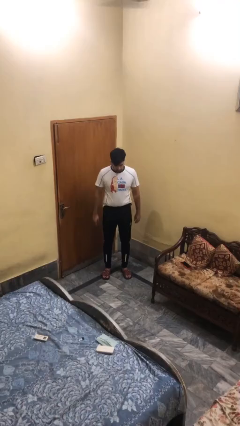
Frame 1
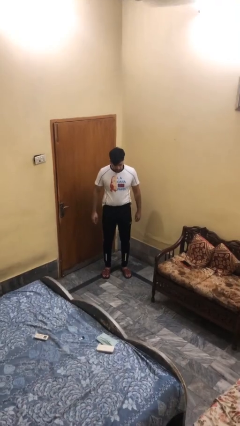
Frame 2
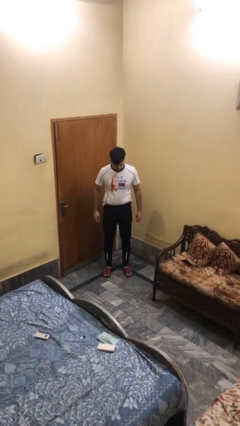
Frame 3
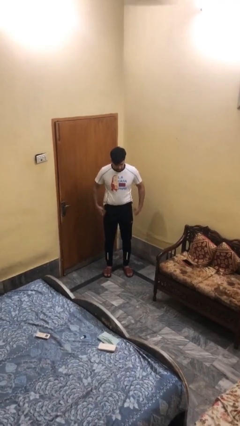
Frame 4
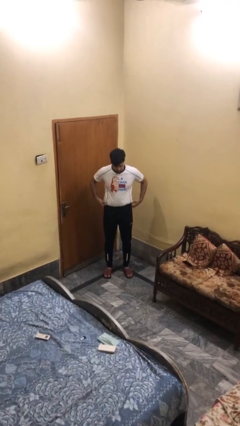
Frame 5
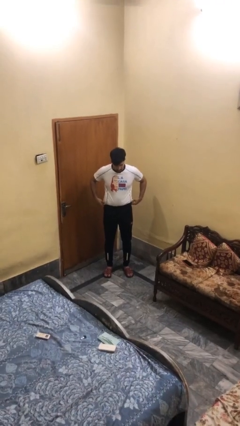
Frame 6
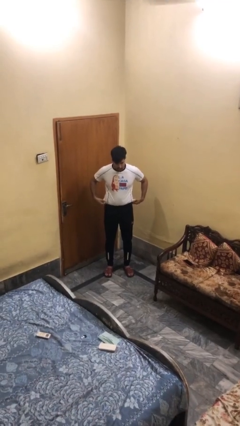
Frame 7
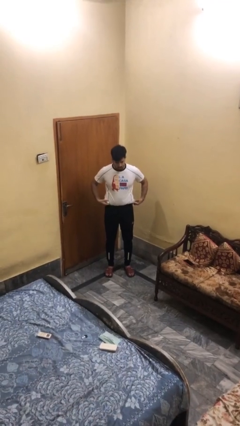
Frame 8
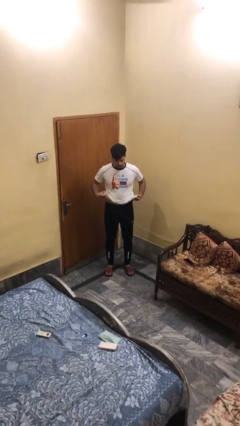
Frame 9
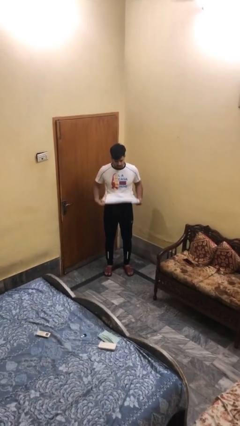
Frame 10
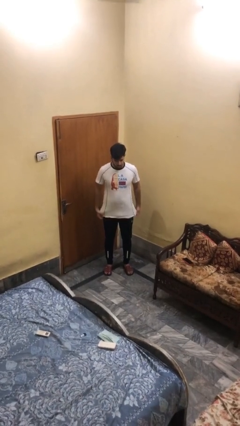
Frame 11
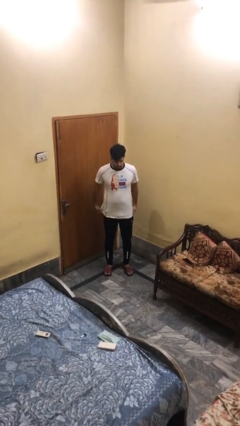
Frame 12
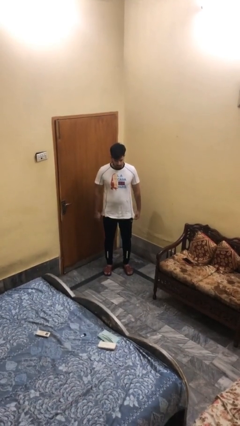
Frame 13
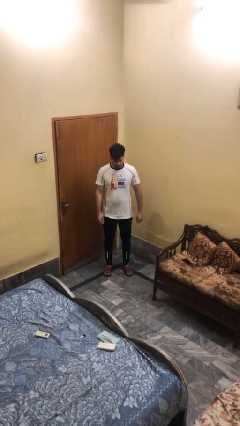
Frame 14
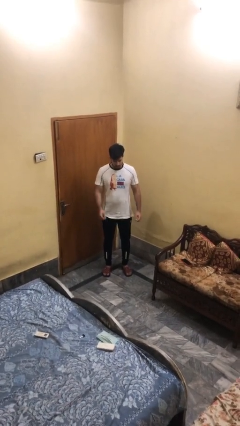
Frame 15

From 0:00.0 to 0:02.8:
person untucks shirt

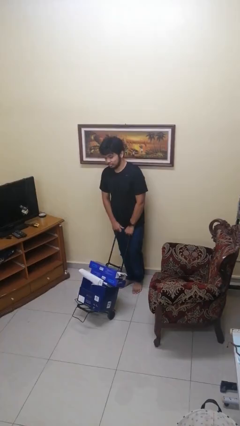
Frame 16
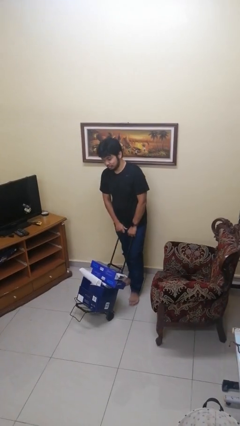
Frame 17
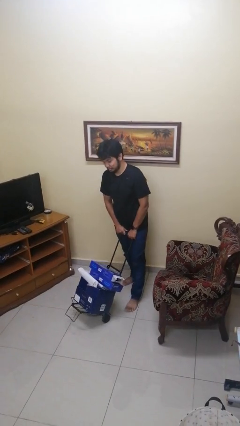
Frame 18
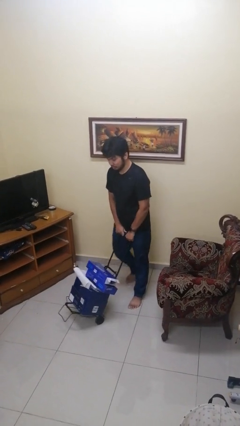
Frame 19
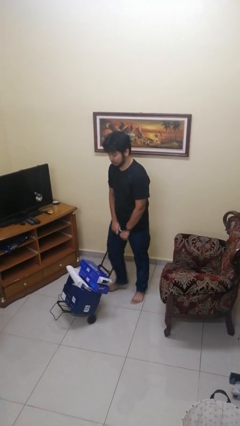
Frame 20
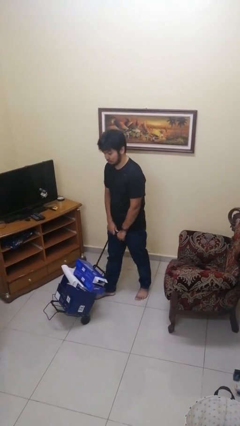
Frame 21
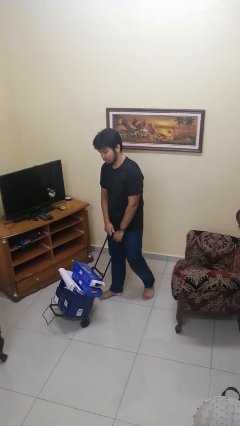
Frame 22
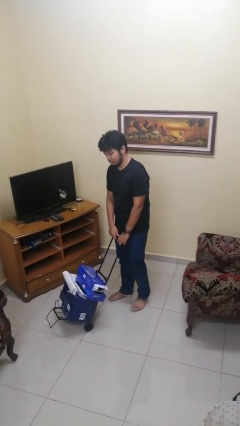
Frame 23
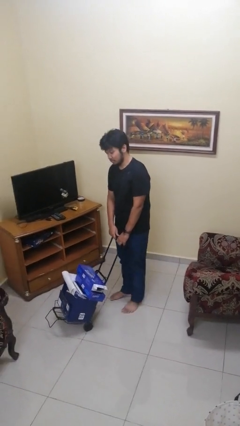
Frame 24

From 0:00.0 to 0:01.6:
person pushes wheeled cart

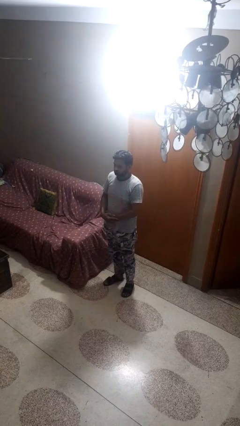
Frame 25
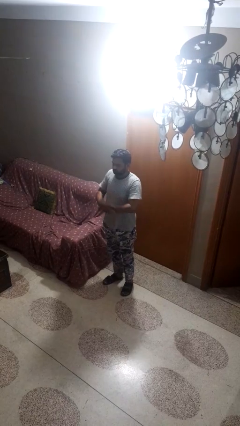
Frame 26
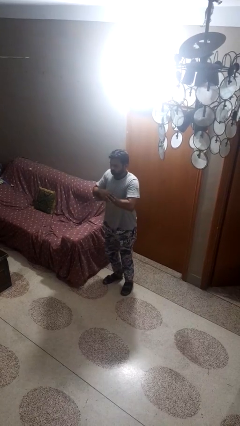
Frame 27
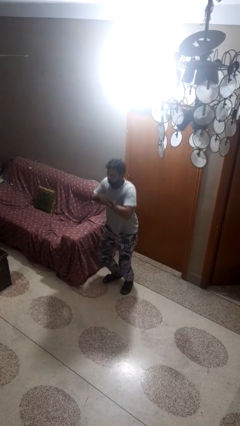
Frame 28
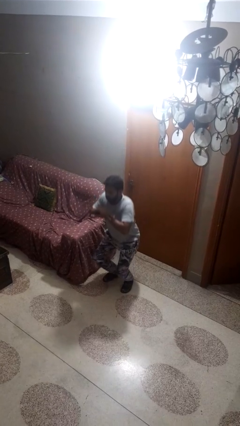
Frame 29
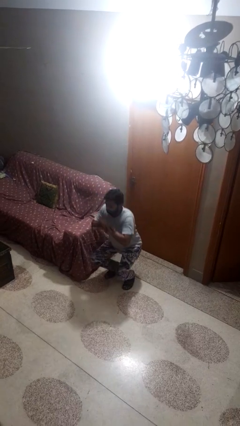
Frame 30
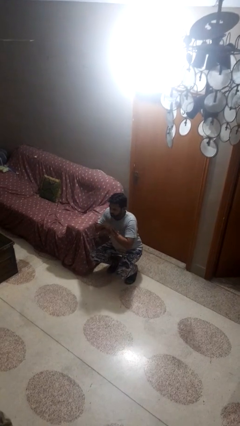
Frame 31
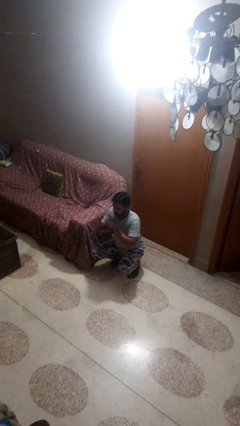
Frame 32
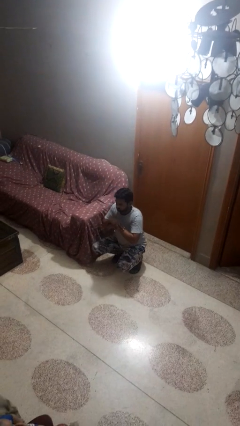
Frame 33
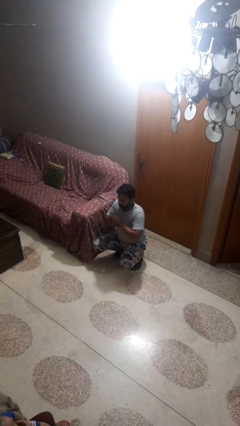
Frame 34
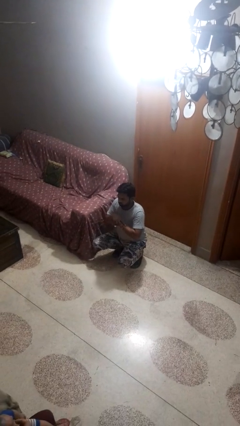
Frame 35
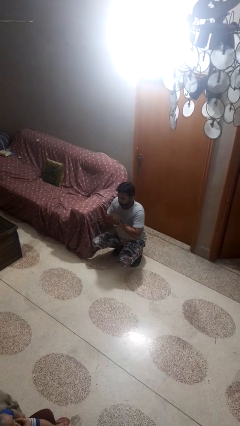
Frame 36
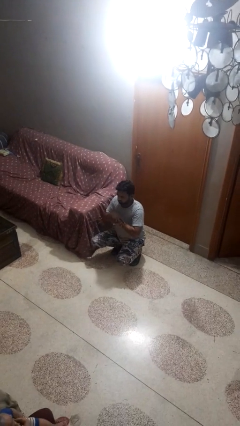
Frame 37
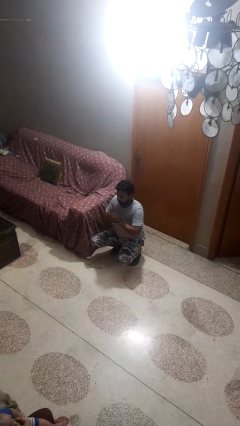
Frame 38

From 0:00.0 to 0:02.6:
person squats

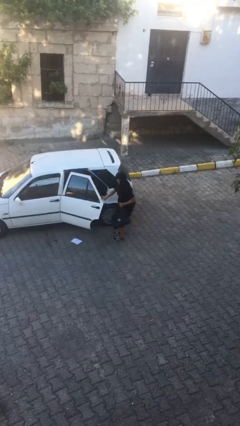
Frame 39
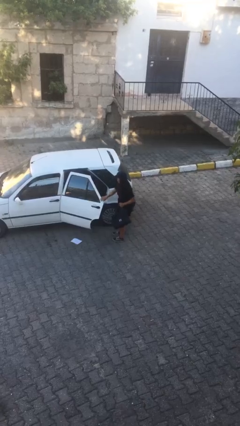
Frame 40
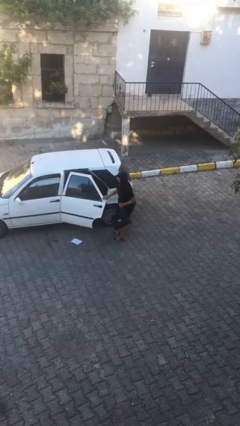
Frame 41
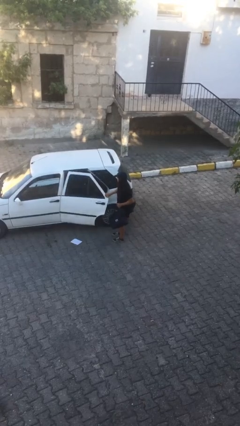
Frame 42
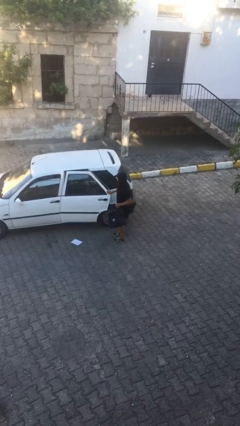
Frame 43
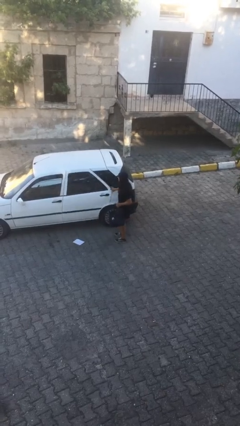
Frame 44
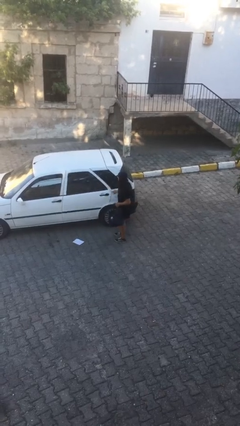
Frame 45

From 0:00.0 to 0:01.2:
person closes car door

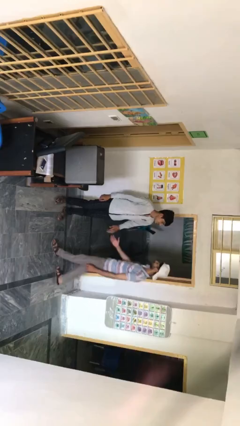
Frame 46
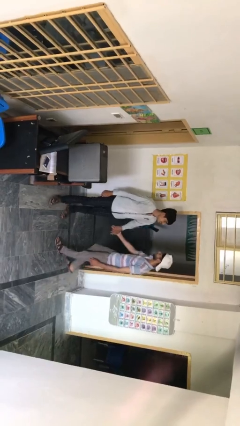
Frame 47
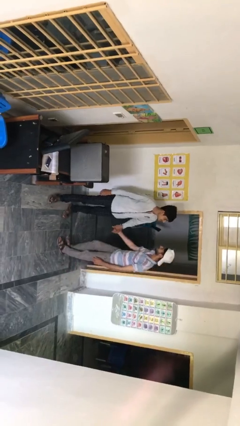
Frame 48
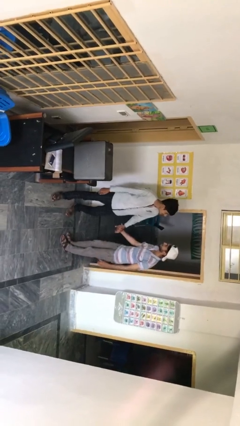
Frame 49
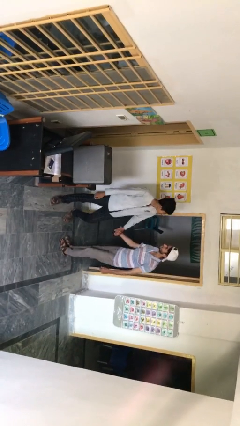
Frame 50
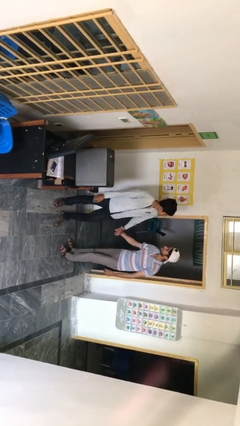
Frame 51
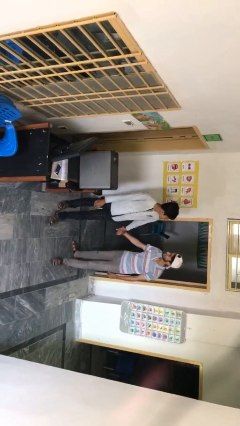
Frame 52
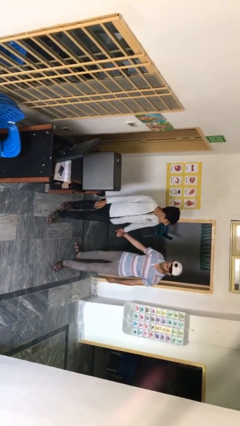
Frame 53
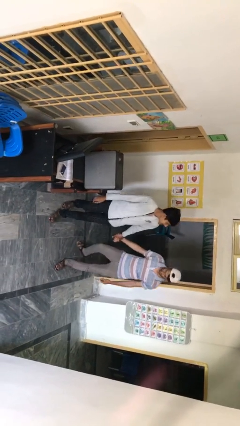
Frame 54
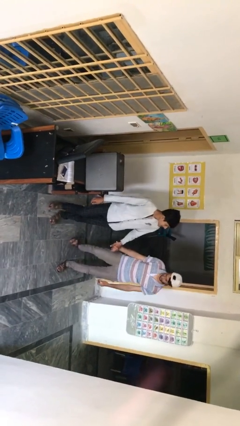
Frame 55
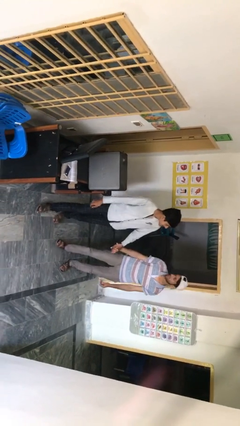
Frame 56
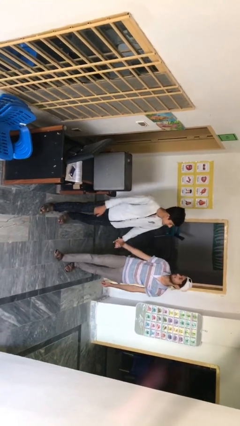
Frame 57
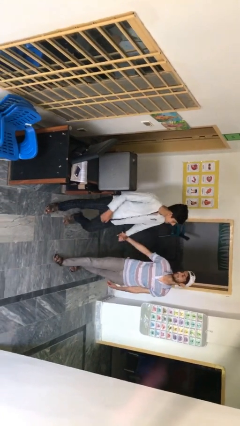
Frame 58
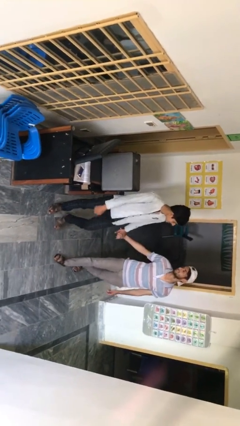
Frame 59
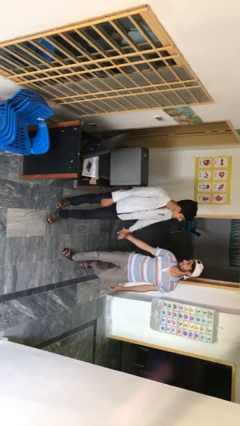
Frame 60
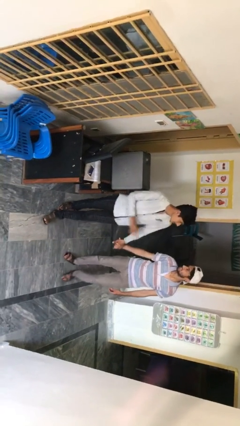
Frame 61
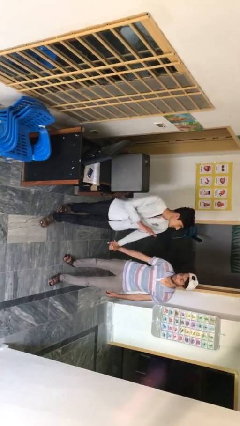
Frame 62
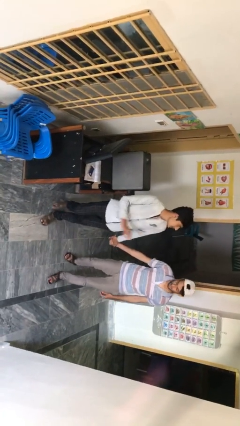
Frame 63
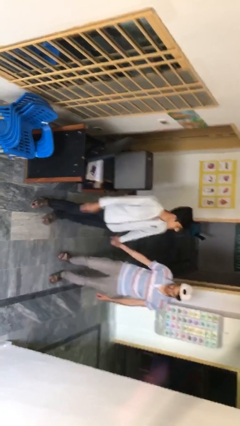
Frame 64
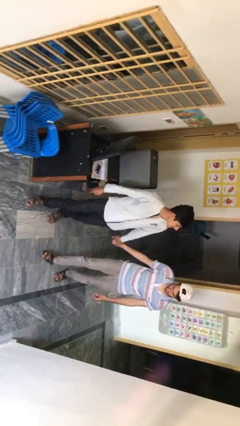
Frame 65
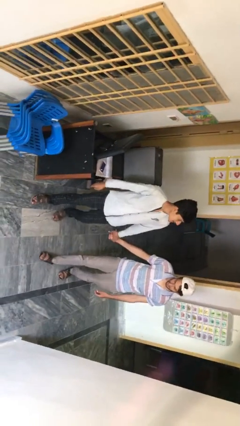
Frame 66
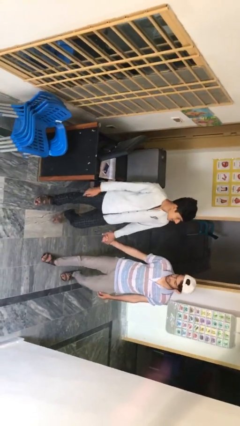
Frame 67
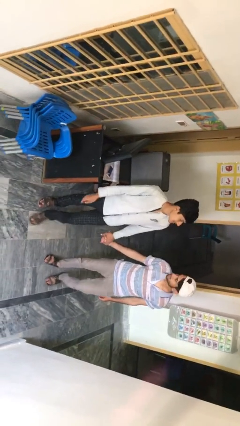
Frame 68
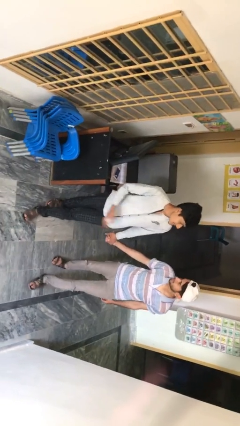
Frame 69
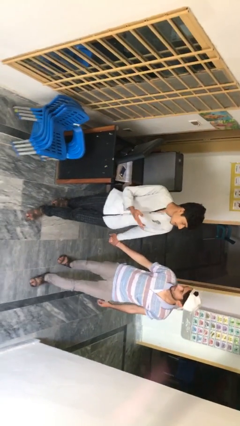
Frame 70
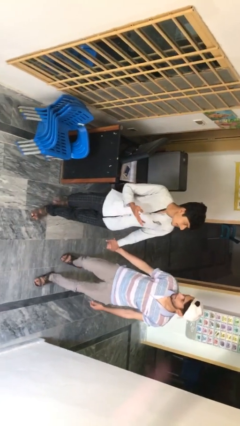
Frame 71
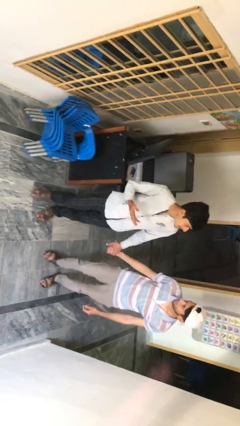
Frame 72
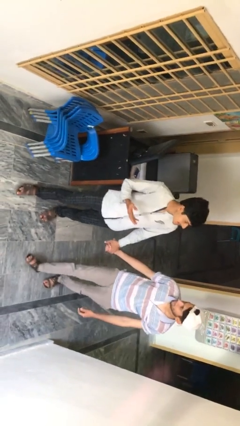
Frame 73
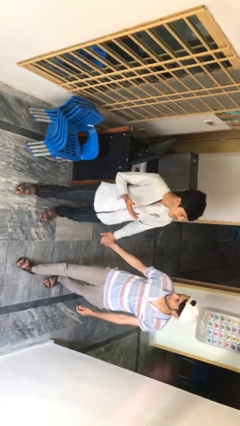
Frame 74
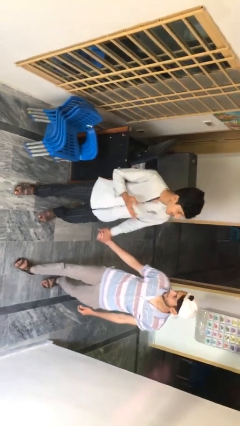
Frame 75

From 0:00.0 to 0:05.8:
person holds hand

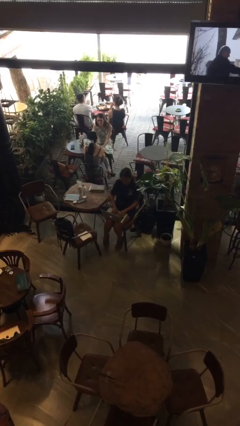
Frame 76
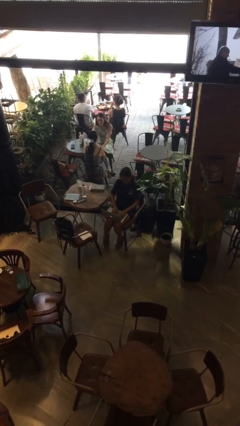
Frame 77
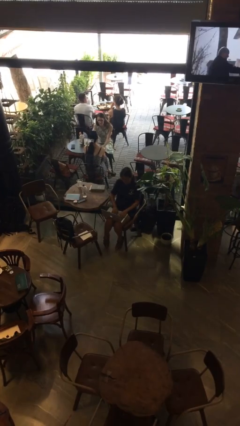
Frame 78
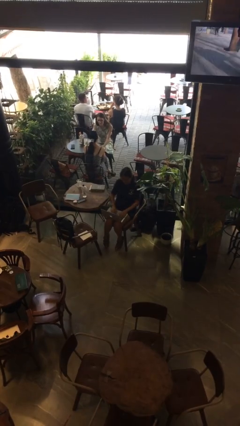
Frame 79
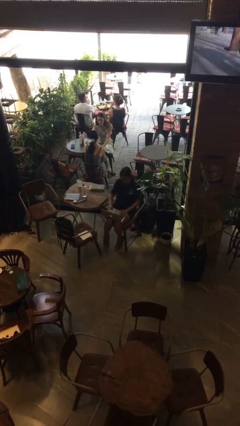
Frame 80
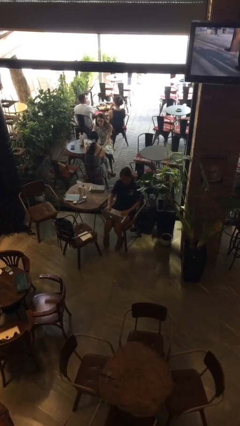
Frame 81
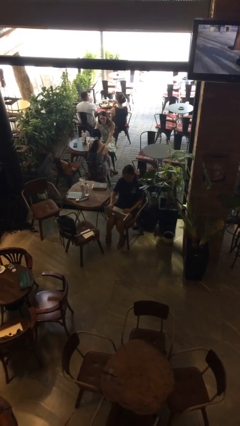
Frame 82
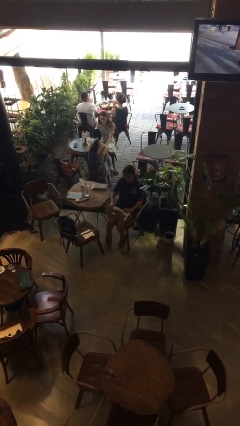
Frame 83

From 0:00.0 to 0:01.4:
person opens laptop

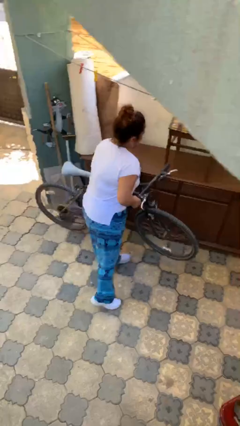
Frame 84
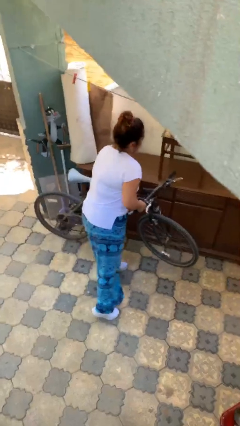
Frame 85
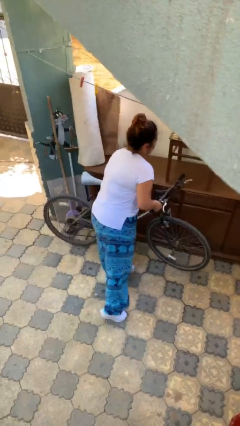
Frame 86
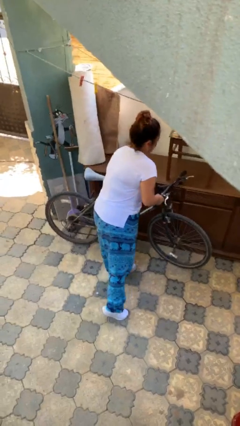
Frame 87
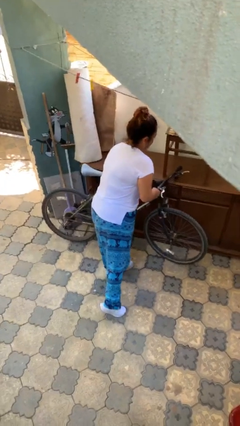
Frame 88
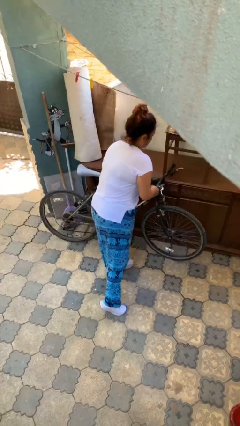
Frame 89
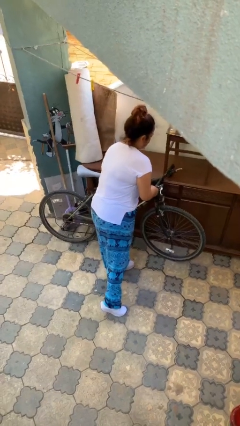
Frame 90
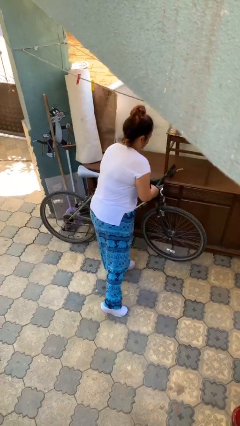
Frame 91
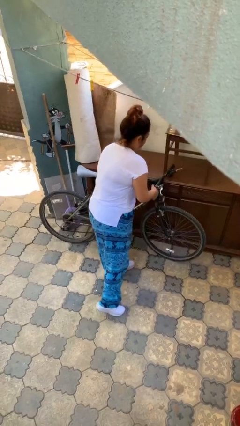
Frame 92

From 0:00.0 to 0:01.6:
person puts down object on floor

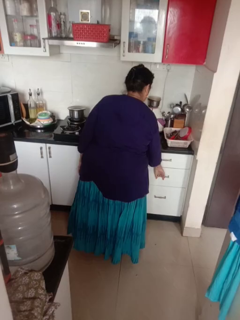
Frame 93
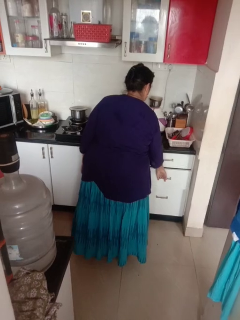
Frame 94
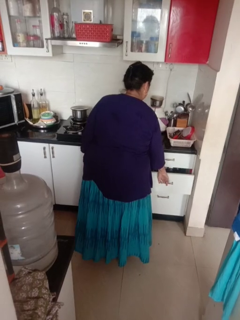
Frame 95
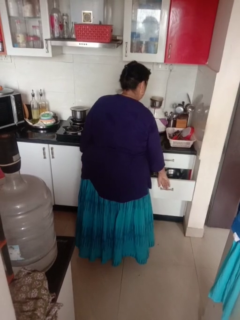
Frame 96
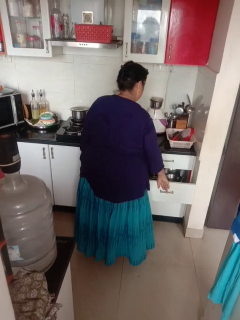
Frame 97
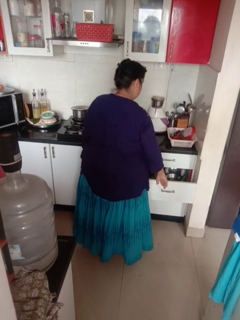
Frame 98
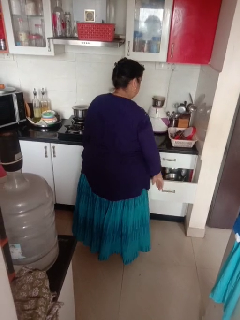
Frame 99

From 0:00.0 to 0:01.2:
person opens kitchen drawer
